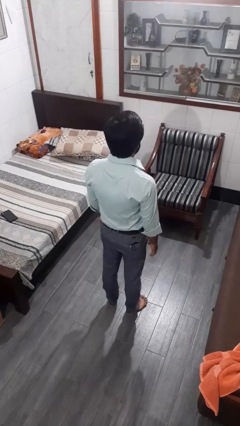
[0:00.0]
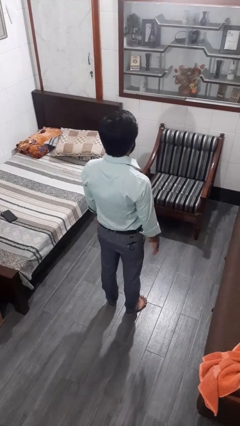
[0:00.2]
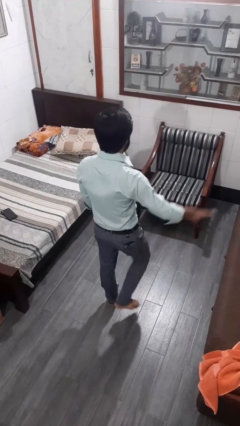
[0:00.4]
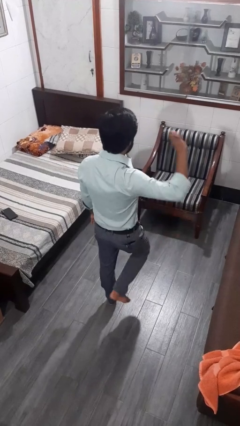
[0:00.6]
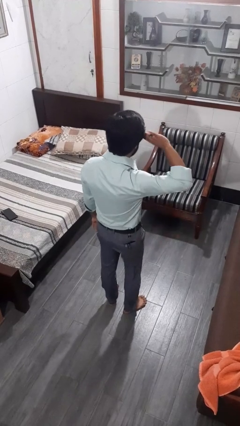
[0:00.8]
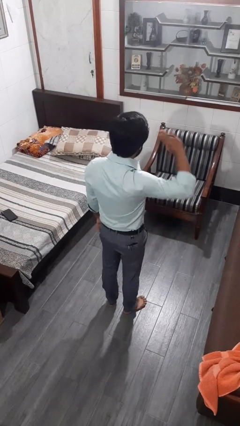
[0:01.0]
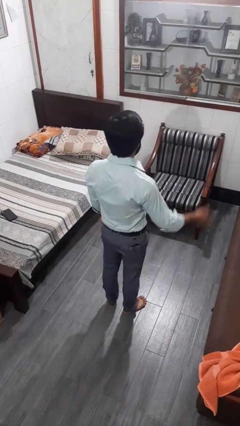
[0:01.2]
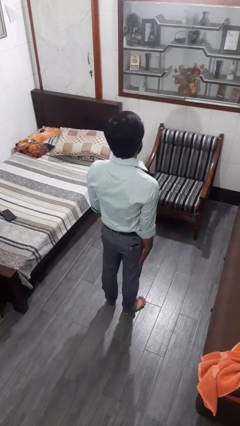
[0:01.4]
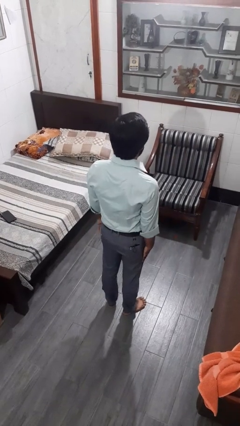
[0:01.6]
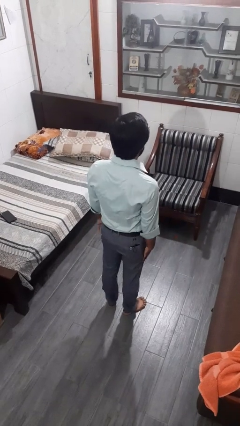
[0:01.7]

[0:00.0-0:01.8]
person salutes

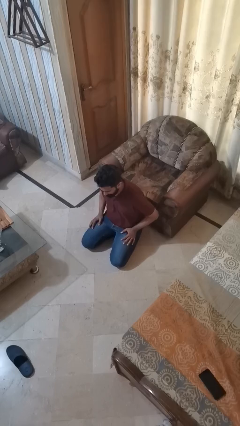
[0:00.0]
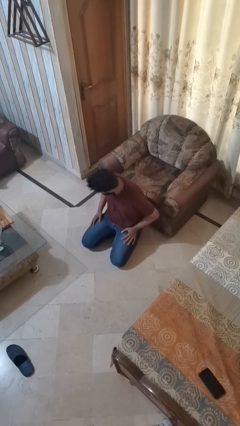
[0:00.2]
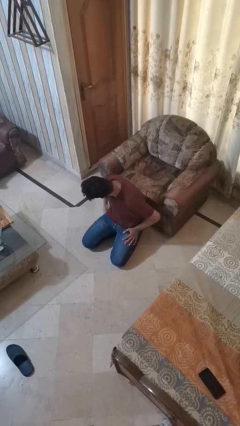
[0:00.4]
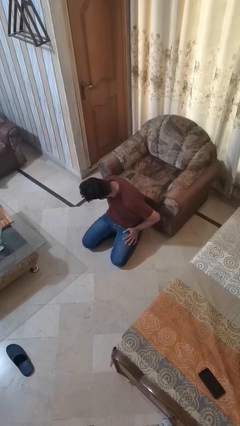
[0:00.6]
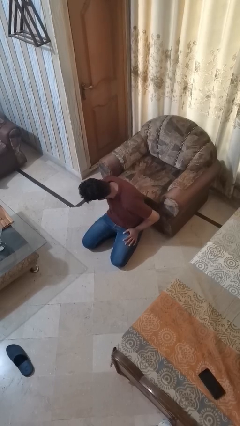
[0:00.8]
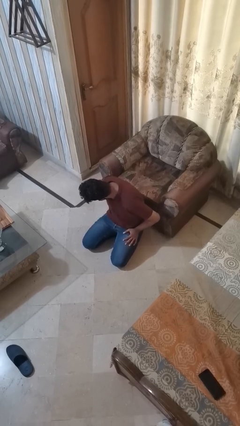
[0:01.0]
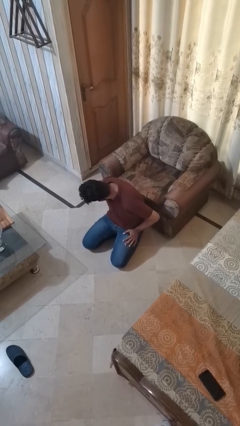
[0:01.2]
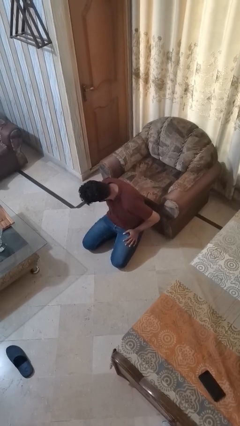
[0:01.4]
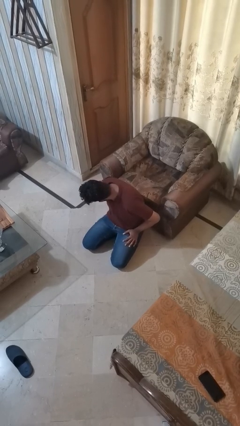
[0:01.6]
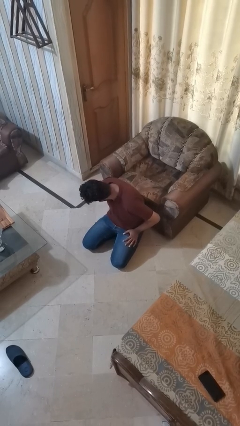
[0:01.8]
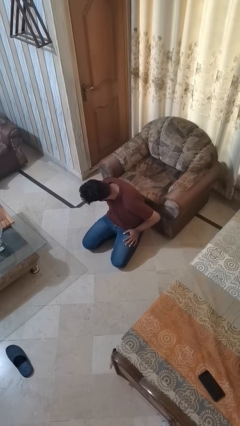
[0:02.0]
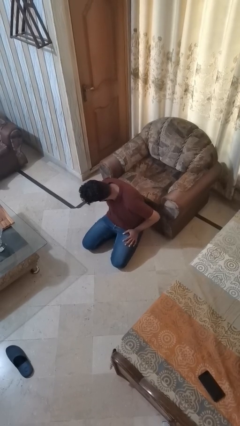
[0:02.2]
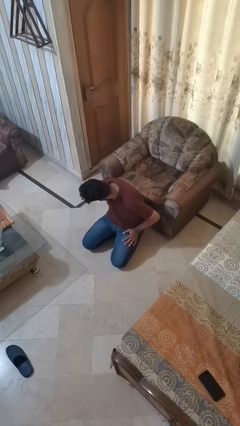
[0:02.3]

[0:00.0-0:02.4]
person searches under couch

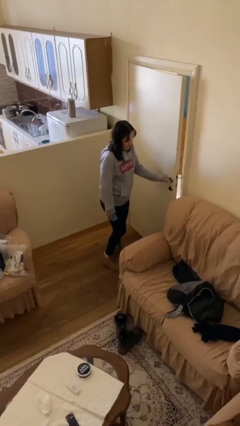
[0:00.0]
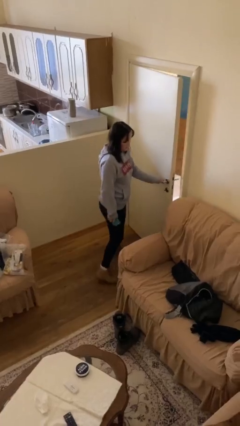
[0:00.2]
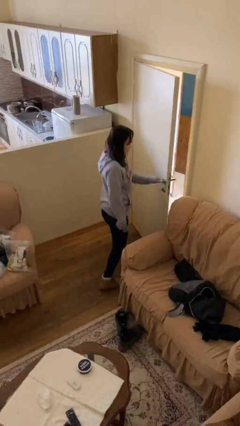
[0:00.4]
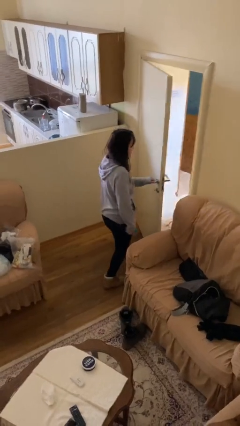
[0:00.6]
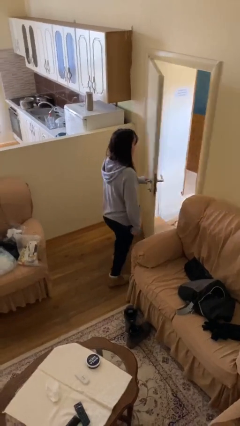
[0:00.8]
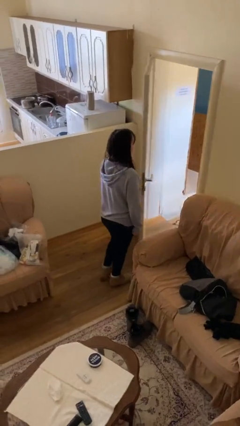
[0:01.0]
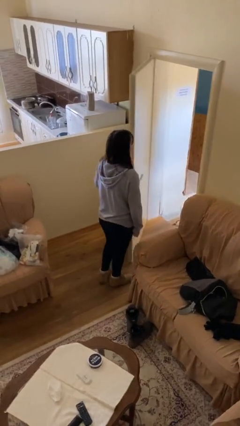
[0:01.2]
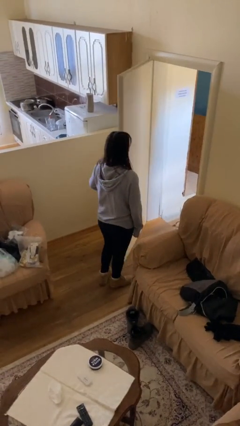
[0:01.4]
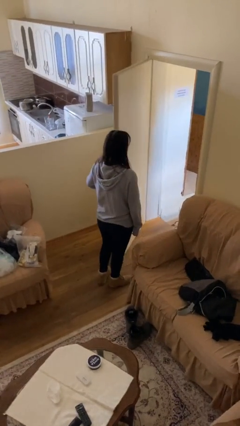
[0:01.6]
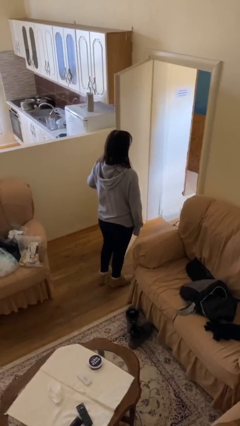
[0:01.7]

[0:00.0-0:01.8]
person opens facility door

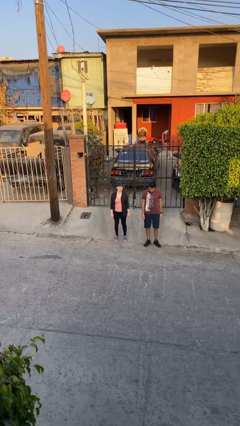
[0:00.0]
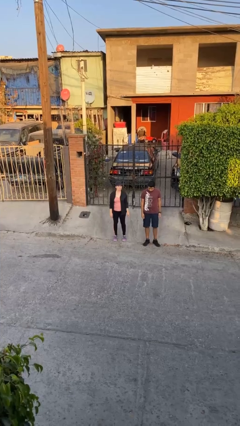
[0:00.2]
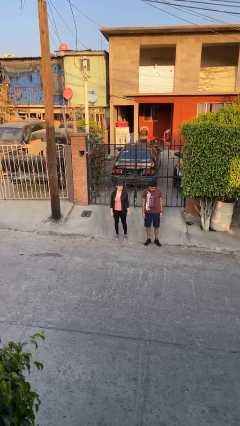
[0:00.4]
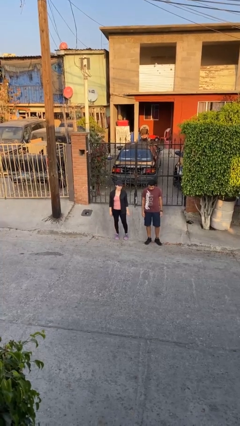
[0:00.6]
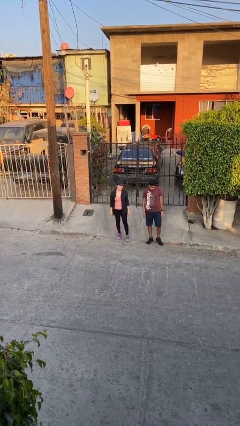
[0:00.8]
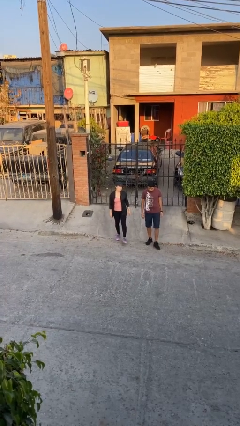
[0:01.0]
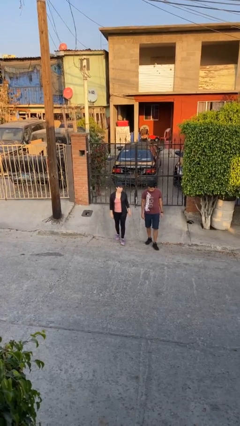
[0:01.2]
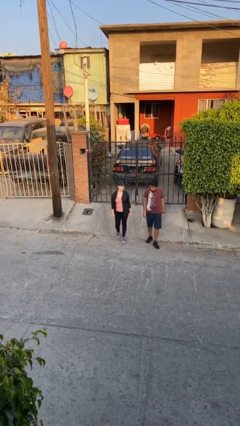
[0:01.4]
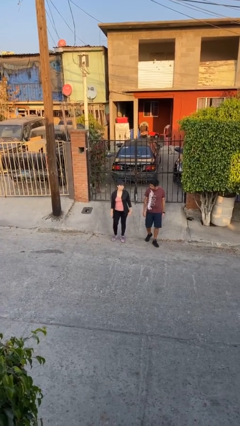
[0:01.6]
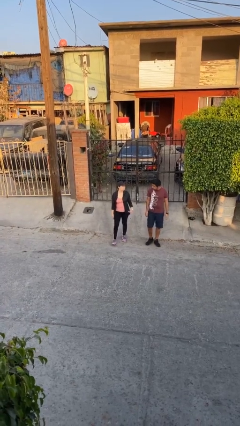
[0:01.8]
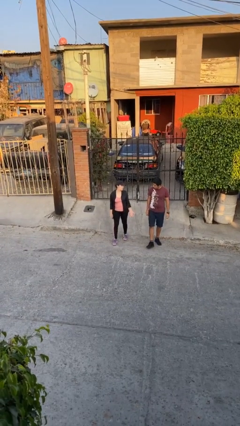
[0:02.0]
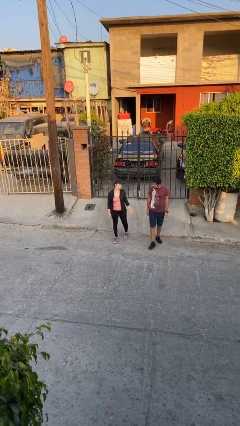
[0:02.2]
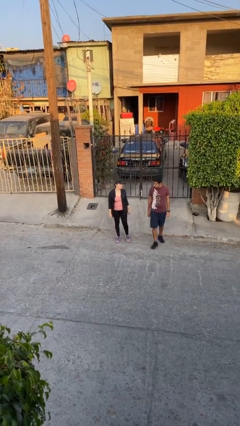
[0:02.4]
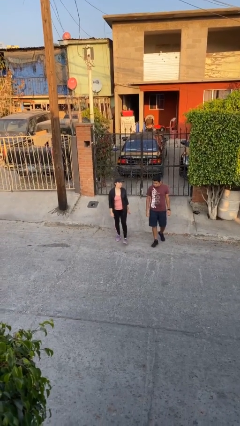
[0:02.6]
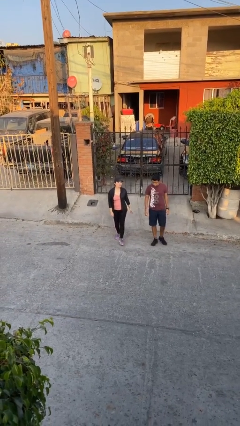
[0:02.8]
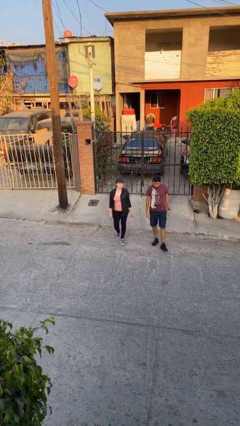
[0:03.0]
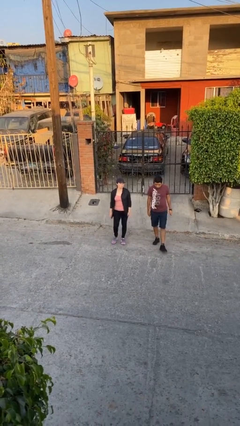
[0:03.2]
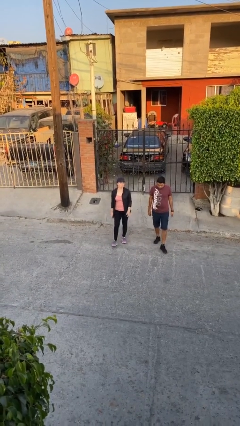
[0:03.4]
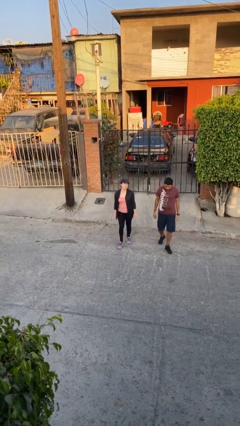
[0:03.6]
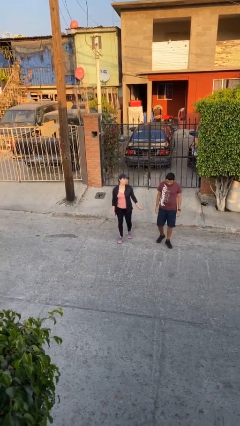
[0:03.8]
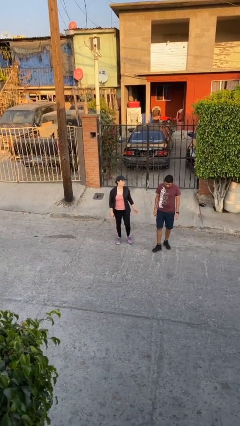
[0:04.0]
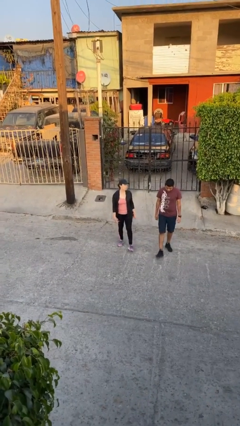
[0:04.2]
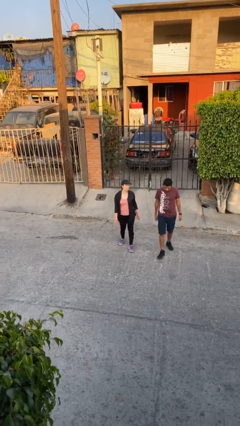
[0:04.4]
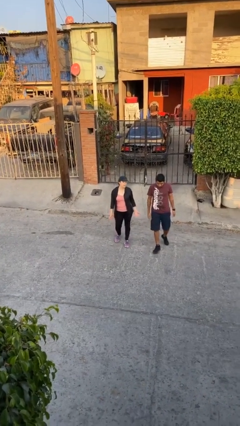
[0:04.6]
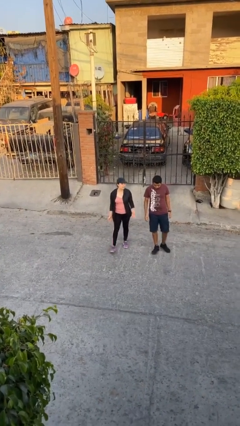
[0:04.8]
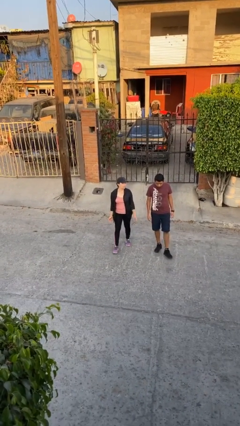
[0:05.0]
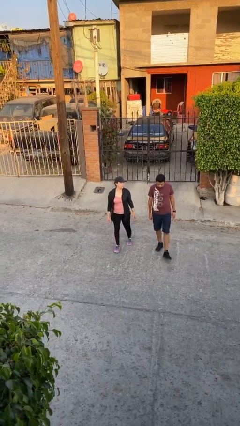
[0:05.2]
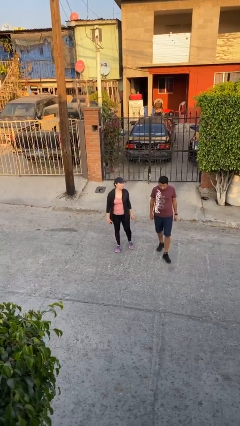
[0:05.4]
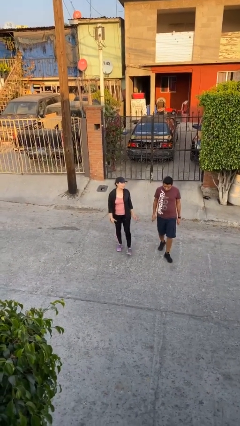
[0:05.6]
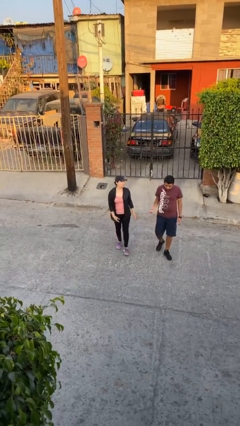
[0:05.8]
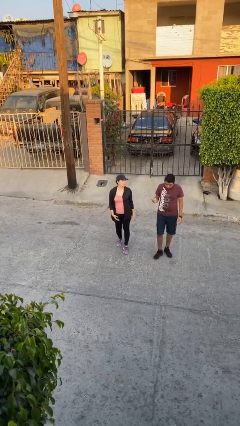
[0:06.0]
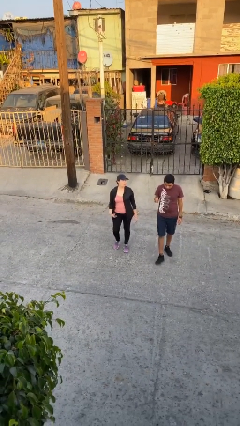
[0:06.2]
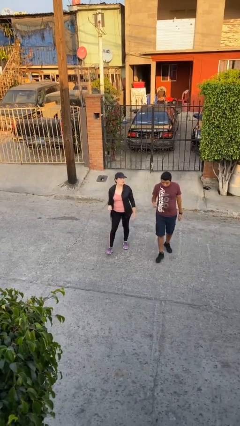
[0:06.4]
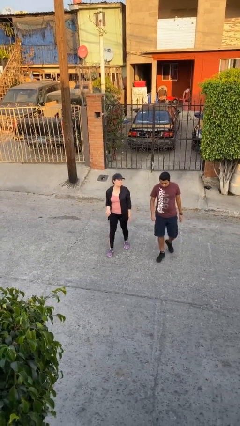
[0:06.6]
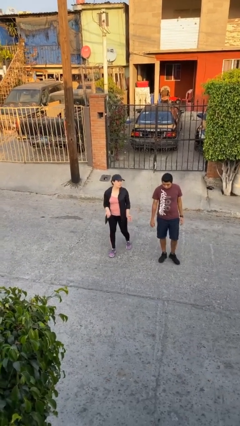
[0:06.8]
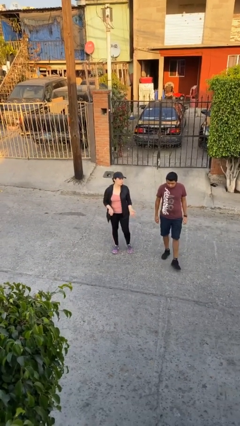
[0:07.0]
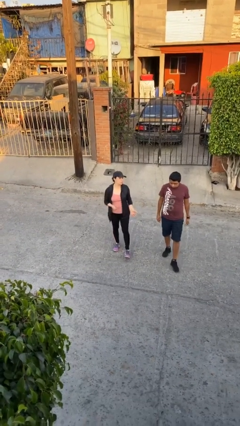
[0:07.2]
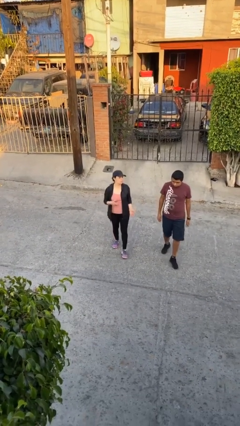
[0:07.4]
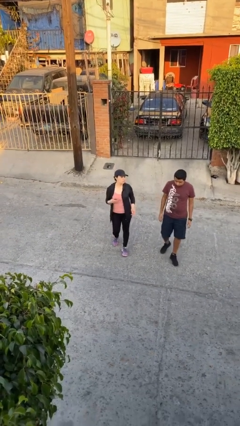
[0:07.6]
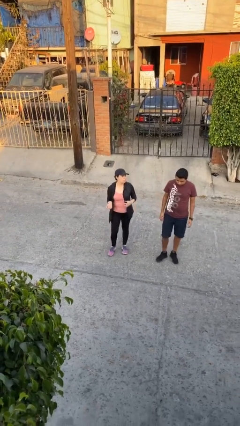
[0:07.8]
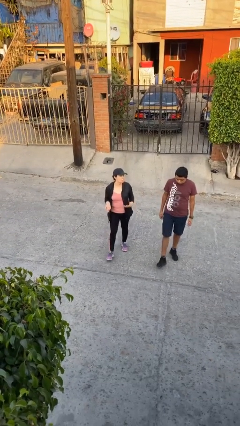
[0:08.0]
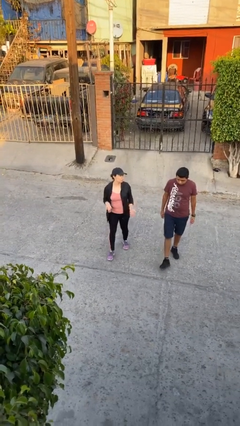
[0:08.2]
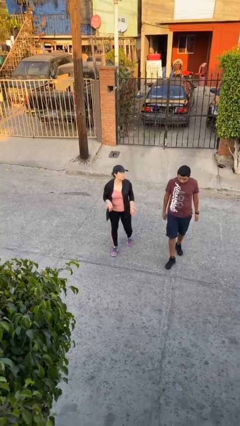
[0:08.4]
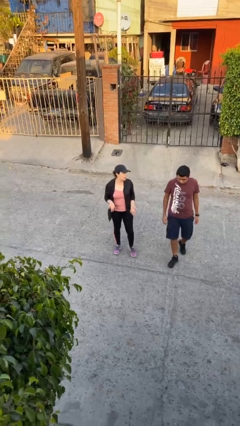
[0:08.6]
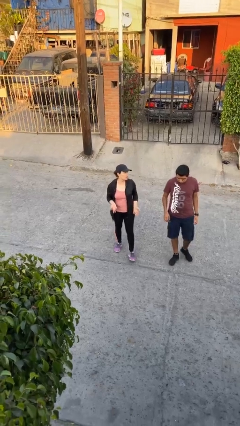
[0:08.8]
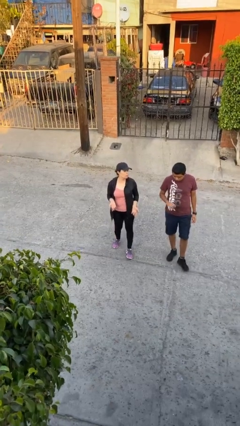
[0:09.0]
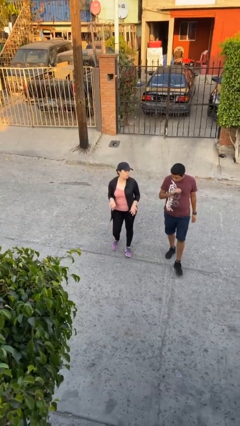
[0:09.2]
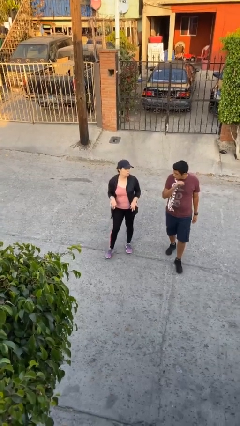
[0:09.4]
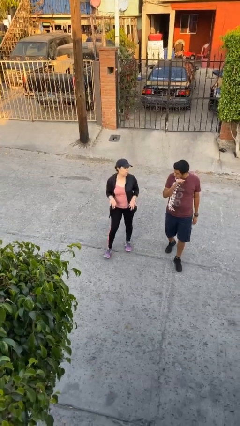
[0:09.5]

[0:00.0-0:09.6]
person talks to person

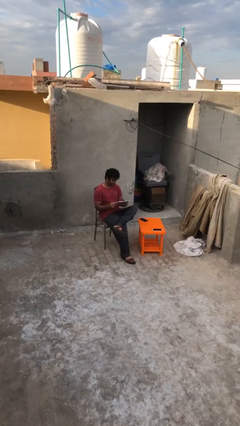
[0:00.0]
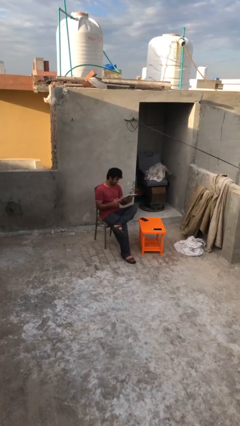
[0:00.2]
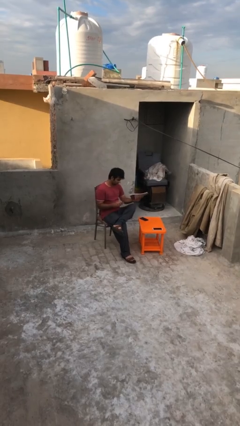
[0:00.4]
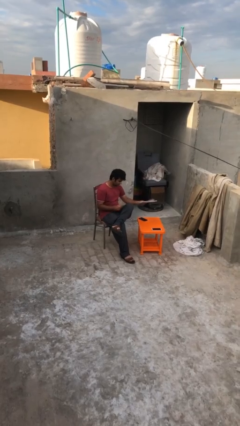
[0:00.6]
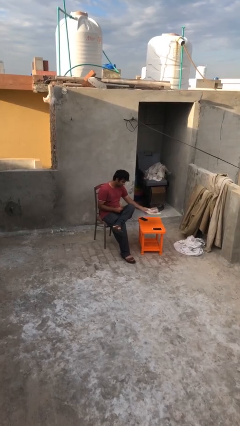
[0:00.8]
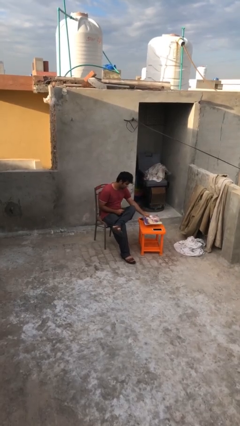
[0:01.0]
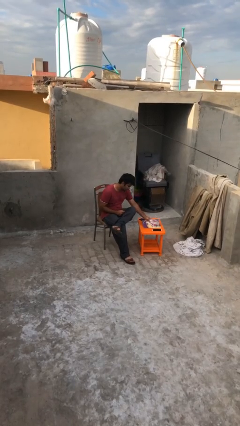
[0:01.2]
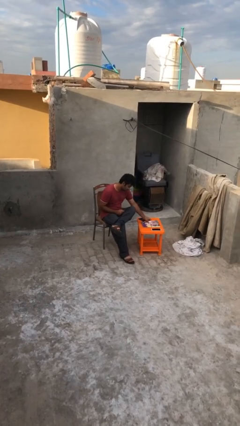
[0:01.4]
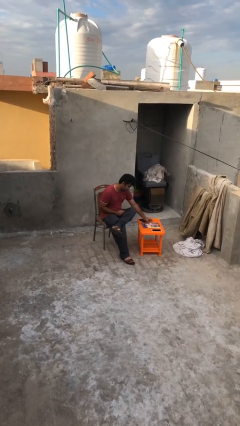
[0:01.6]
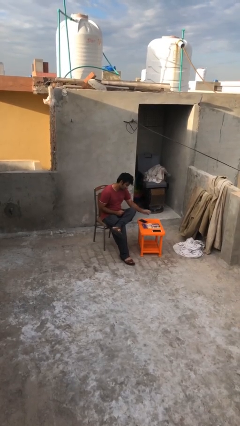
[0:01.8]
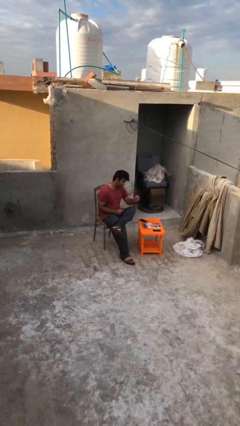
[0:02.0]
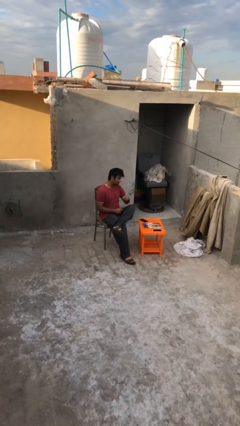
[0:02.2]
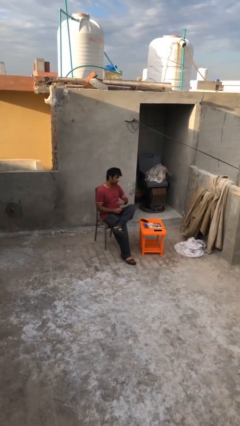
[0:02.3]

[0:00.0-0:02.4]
person puts down object on table
